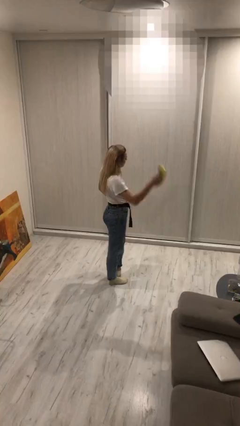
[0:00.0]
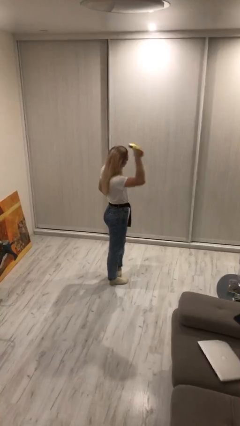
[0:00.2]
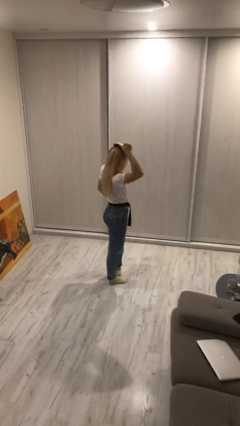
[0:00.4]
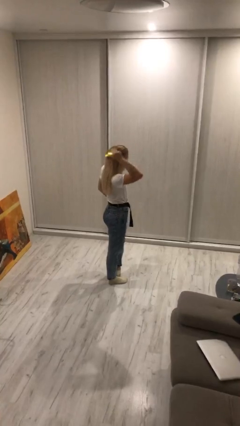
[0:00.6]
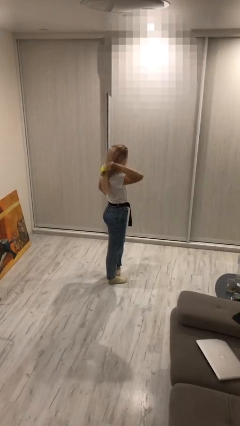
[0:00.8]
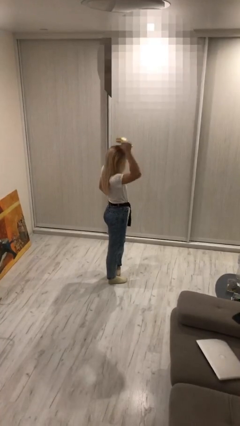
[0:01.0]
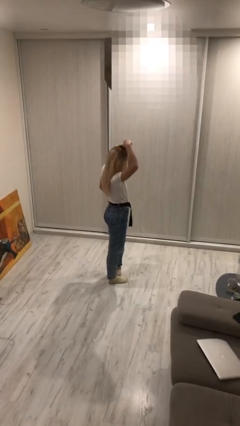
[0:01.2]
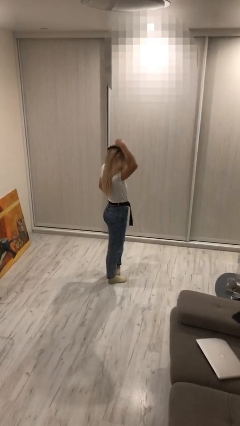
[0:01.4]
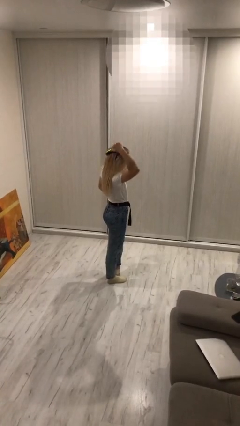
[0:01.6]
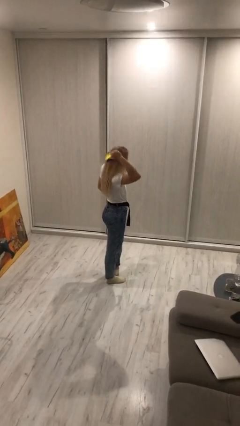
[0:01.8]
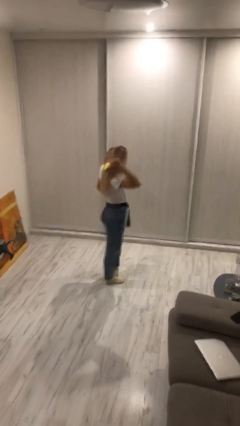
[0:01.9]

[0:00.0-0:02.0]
person brushes hair

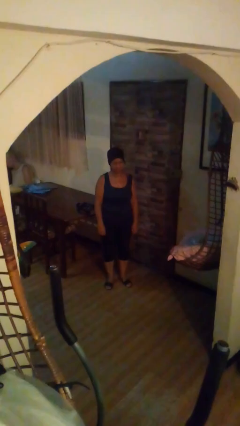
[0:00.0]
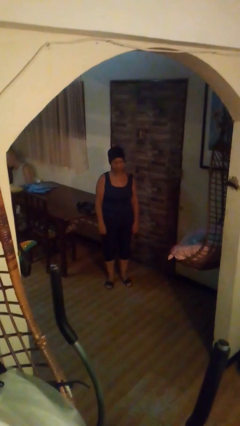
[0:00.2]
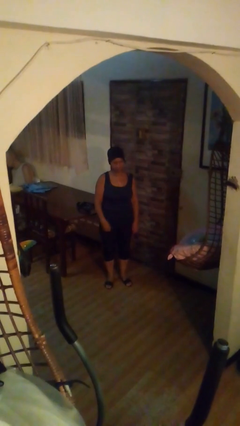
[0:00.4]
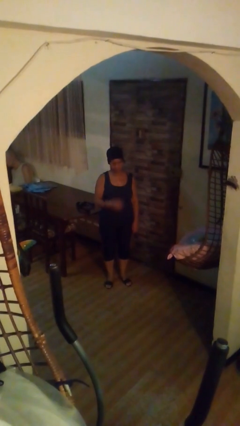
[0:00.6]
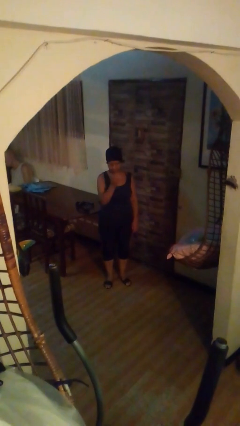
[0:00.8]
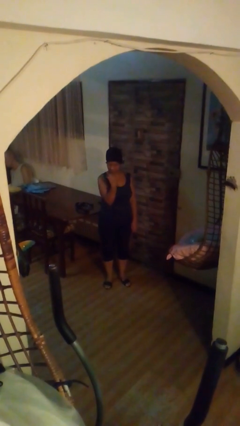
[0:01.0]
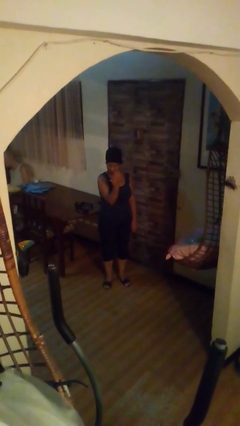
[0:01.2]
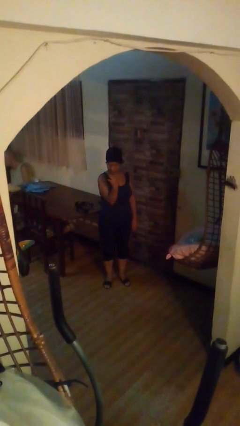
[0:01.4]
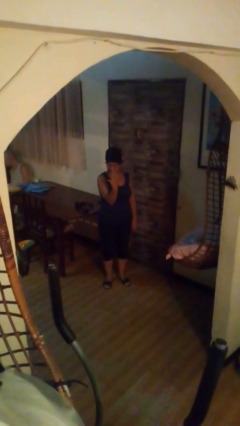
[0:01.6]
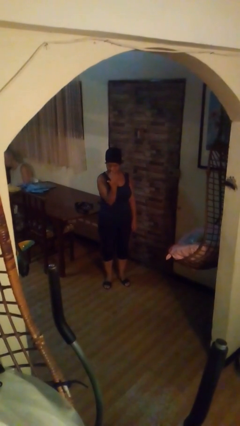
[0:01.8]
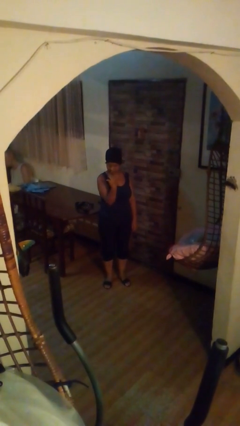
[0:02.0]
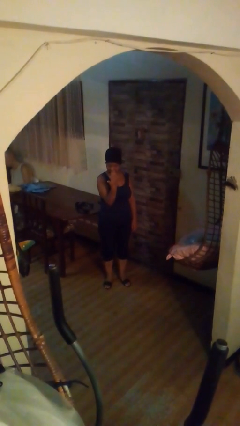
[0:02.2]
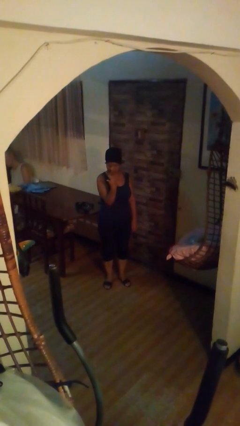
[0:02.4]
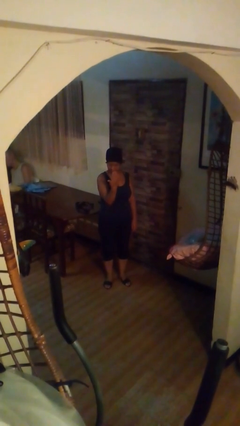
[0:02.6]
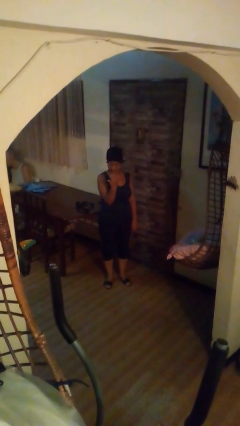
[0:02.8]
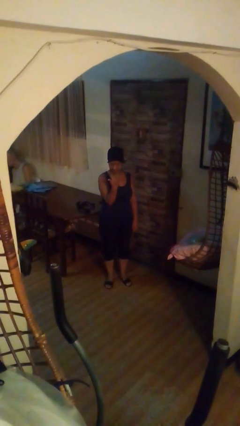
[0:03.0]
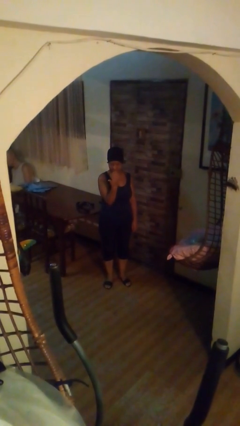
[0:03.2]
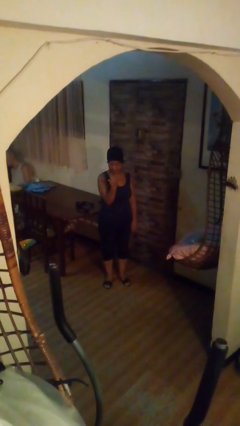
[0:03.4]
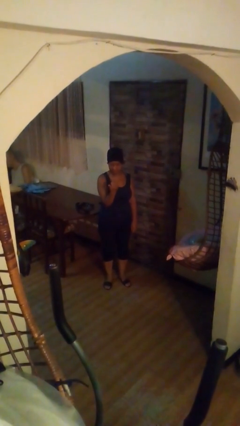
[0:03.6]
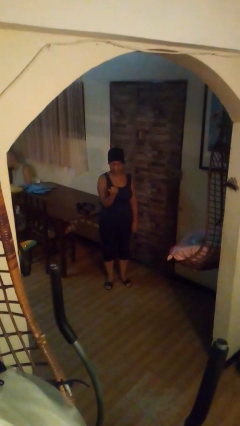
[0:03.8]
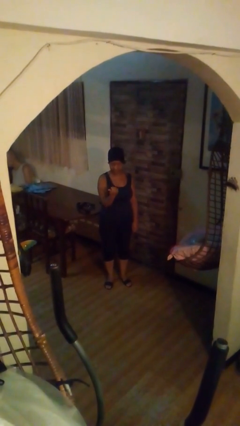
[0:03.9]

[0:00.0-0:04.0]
person gestures come here

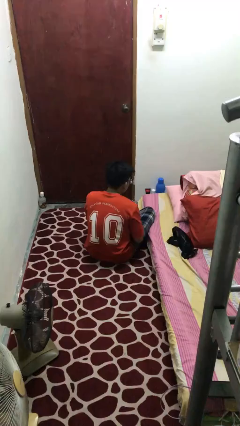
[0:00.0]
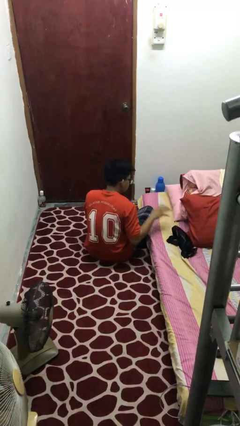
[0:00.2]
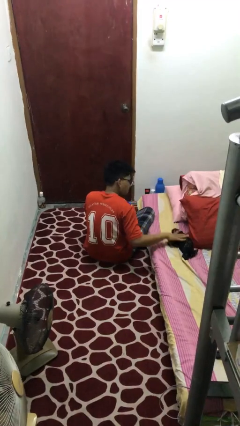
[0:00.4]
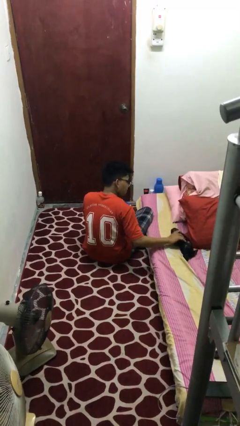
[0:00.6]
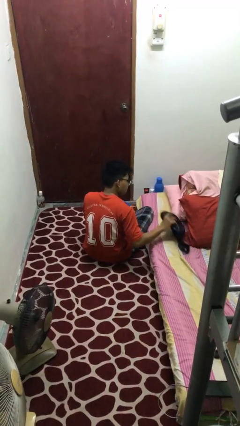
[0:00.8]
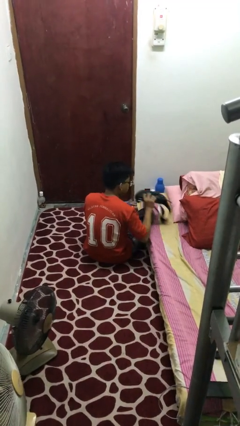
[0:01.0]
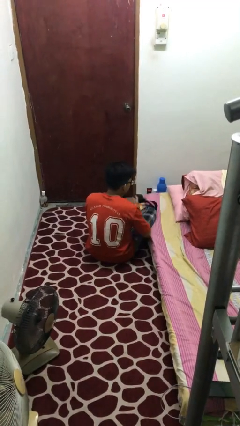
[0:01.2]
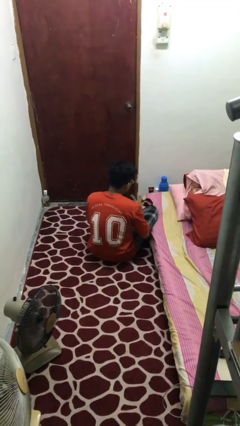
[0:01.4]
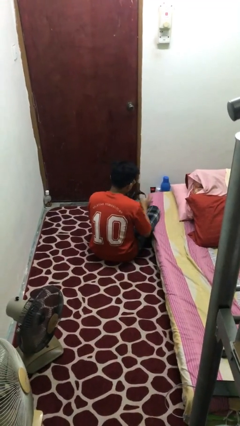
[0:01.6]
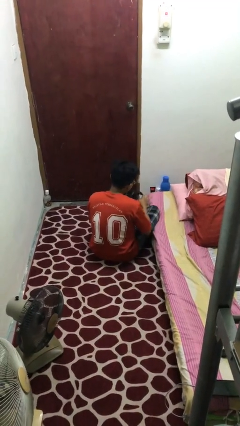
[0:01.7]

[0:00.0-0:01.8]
person picks up object from bed

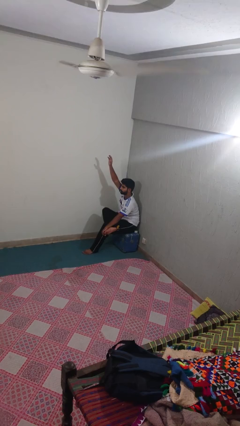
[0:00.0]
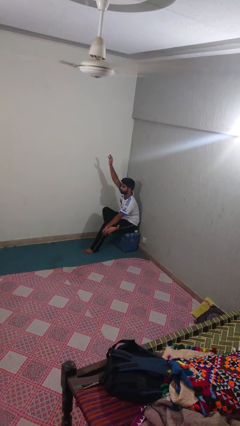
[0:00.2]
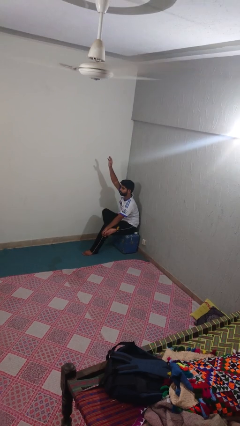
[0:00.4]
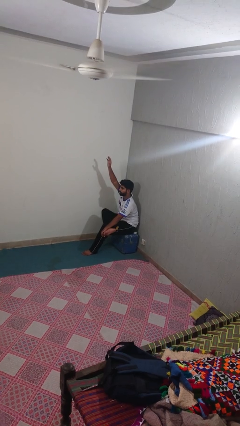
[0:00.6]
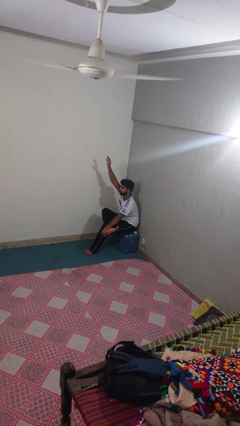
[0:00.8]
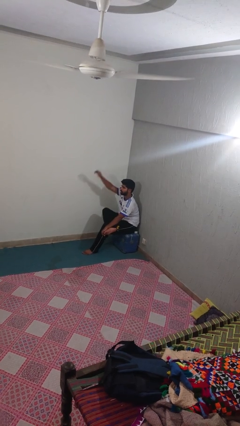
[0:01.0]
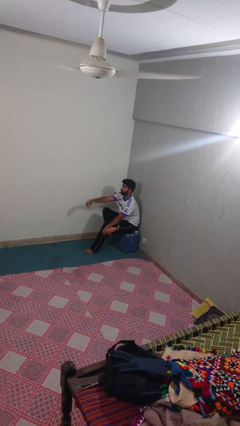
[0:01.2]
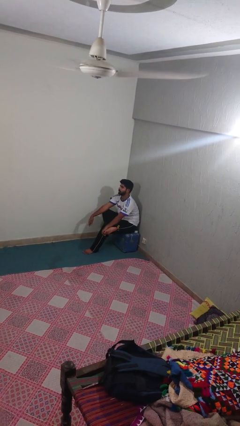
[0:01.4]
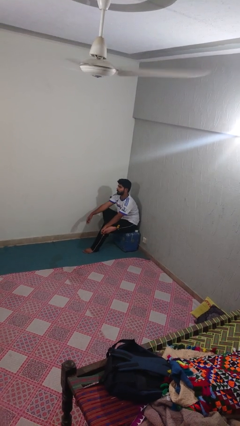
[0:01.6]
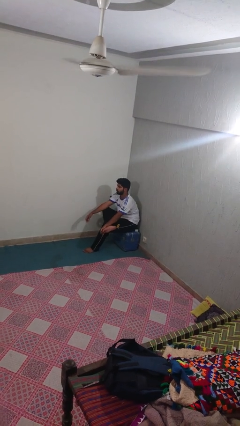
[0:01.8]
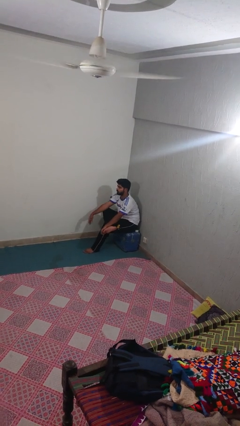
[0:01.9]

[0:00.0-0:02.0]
person gestures lower hand

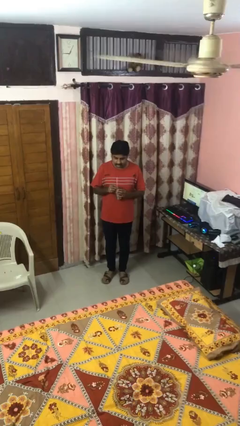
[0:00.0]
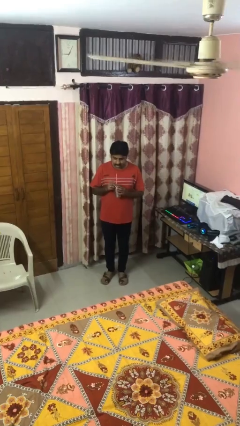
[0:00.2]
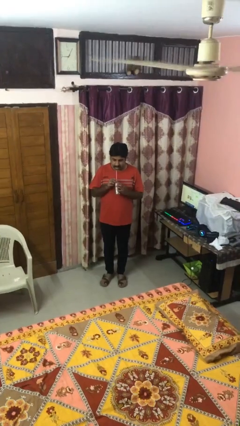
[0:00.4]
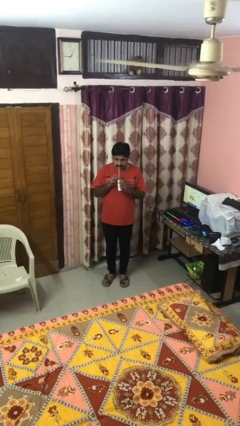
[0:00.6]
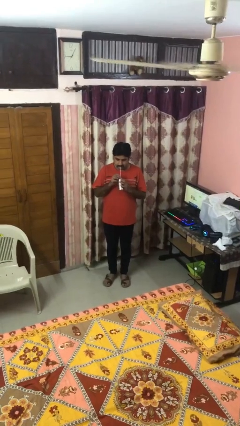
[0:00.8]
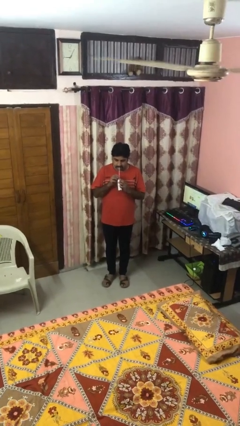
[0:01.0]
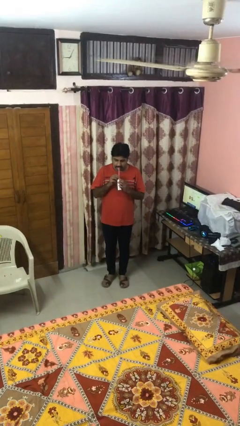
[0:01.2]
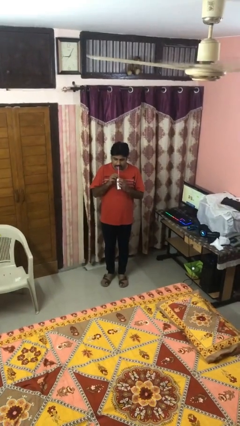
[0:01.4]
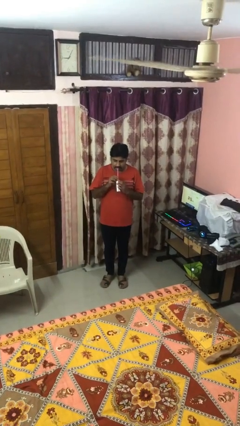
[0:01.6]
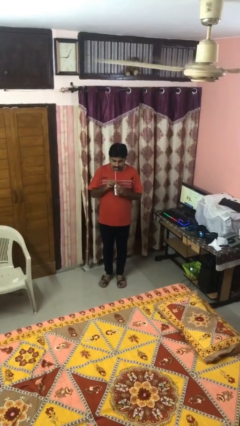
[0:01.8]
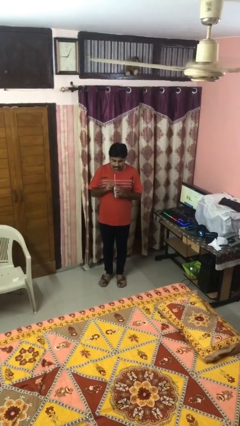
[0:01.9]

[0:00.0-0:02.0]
person drinks from straw

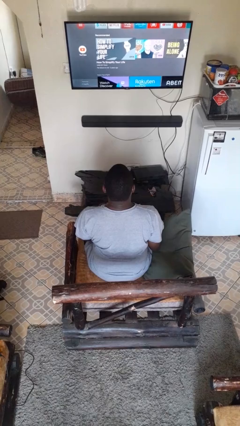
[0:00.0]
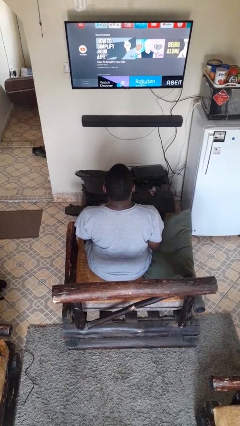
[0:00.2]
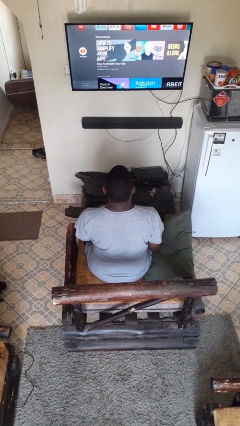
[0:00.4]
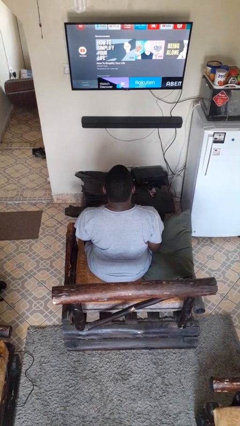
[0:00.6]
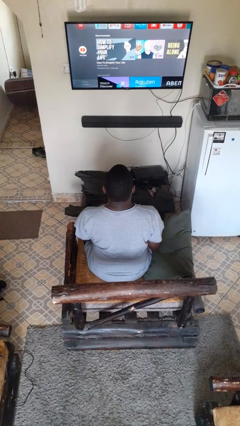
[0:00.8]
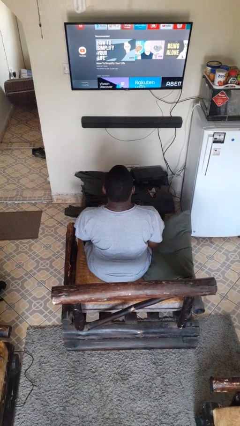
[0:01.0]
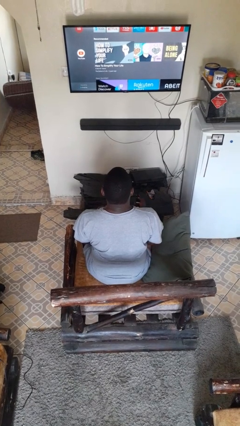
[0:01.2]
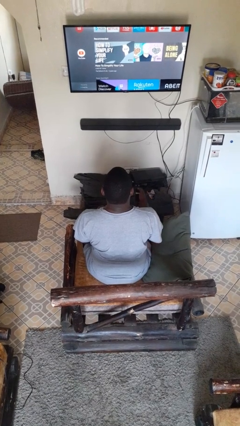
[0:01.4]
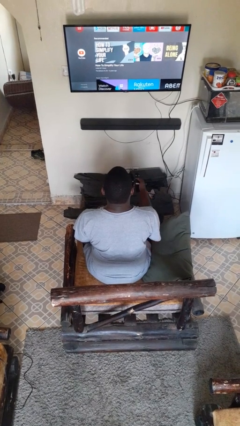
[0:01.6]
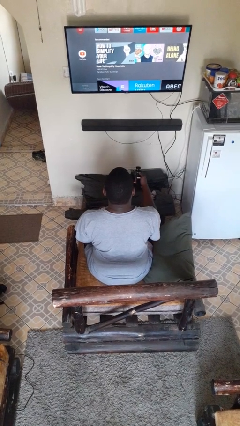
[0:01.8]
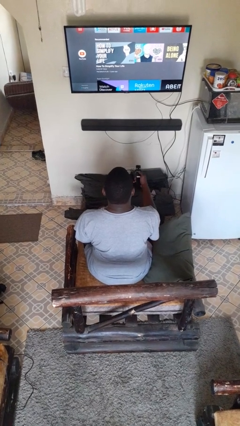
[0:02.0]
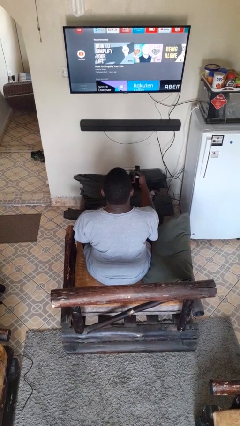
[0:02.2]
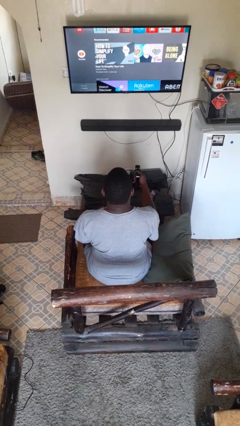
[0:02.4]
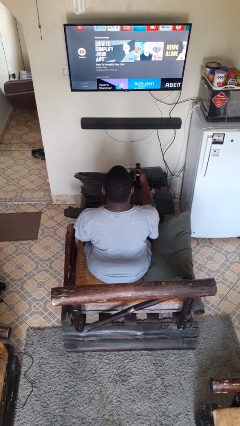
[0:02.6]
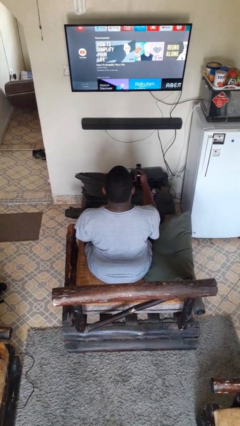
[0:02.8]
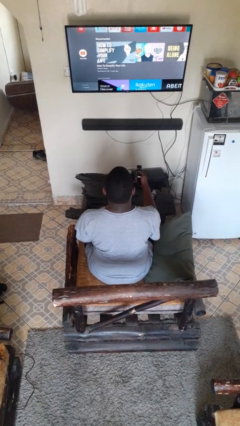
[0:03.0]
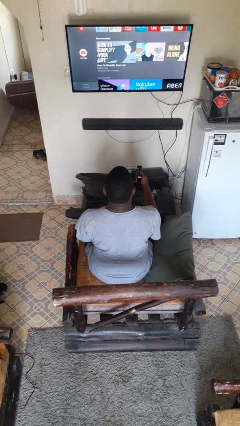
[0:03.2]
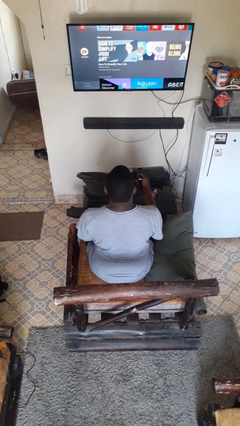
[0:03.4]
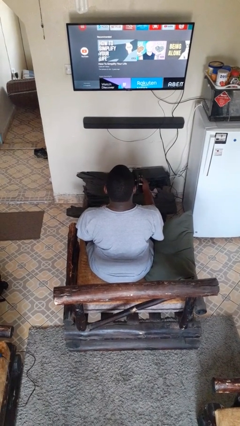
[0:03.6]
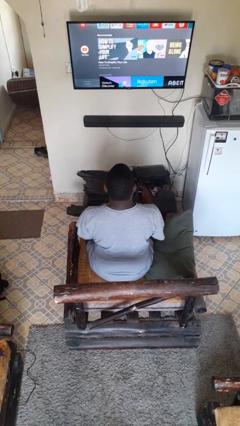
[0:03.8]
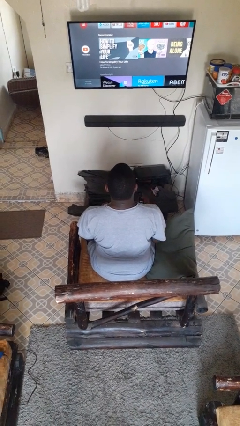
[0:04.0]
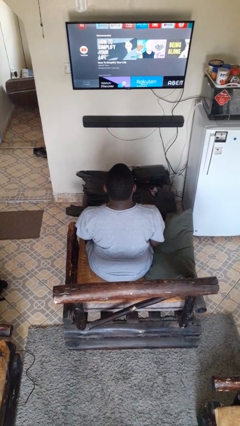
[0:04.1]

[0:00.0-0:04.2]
person uses television remote

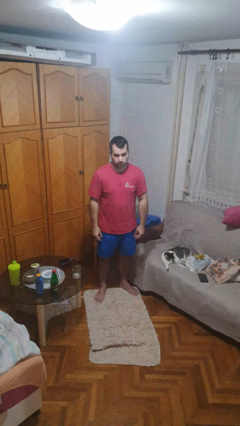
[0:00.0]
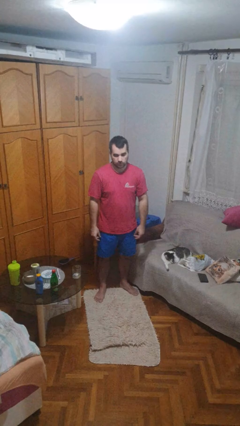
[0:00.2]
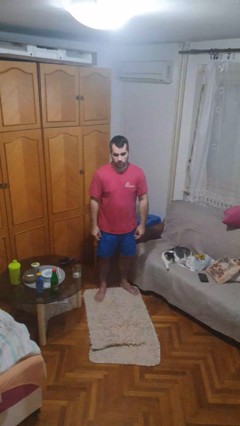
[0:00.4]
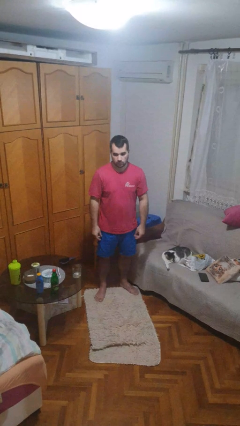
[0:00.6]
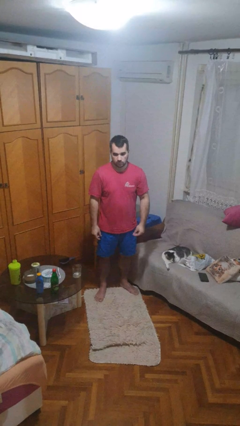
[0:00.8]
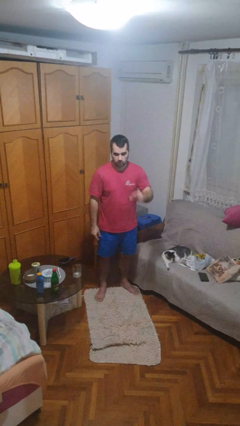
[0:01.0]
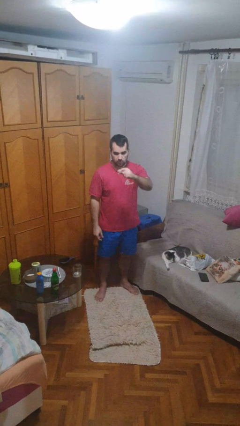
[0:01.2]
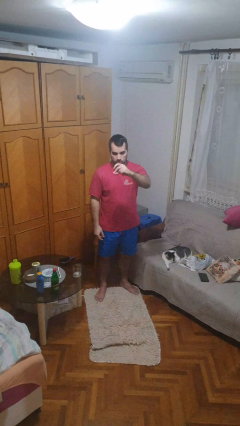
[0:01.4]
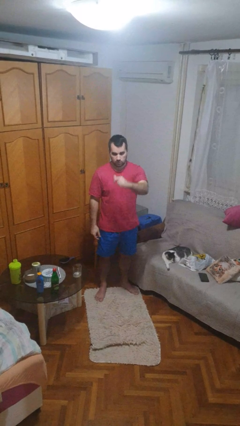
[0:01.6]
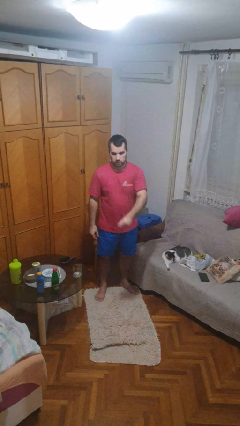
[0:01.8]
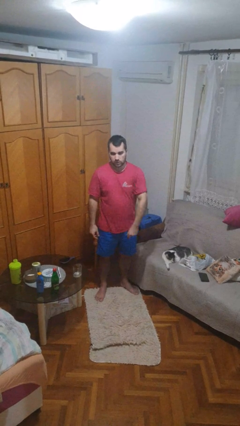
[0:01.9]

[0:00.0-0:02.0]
person snaps fingers
